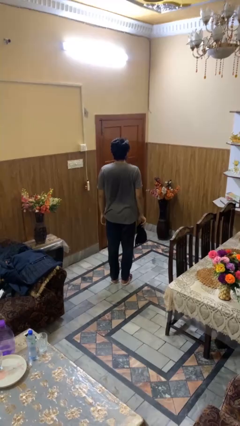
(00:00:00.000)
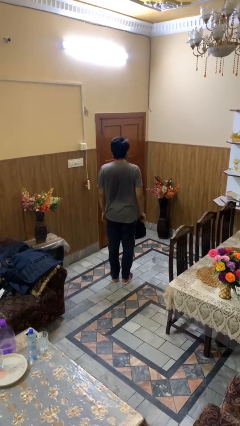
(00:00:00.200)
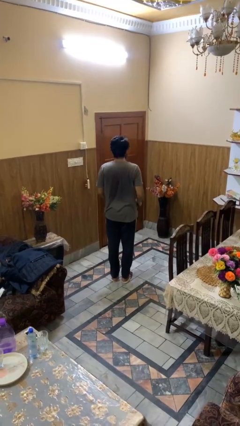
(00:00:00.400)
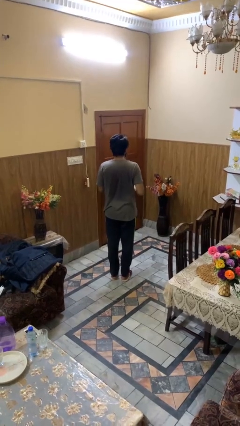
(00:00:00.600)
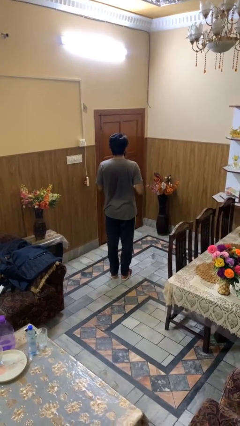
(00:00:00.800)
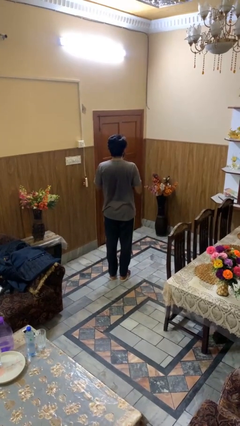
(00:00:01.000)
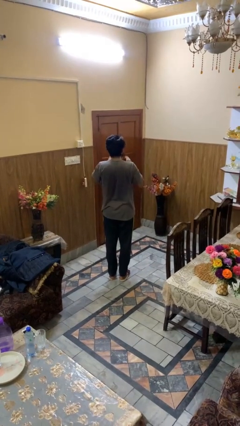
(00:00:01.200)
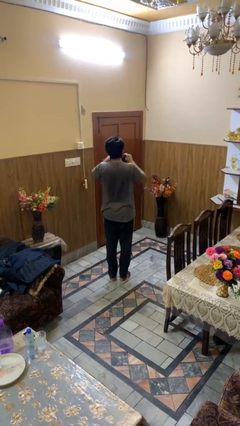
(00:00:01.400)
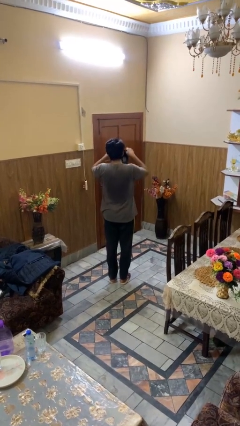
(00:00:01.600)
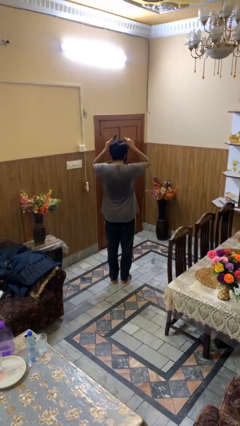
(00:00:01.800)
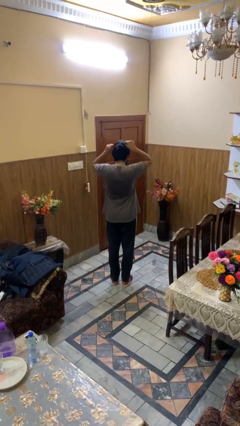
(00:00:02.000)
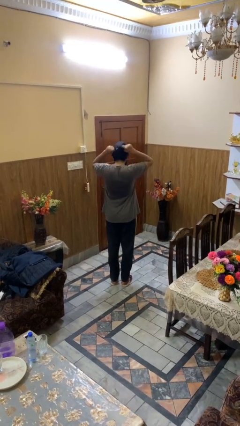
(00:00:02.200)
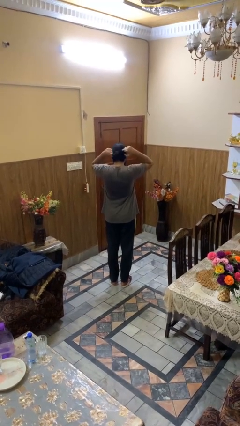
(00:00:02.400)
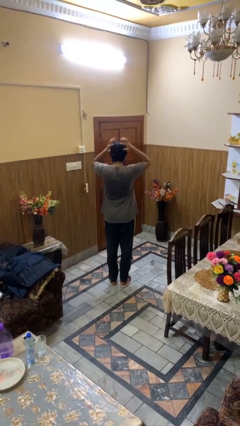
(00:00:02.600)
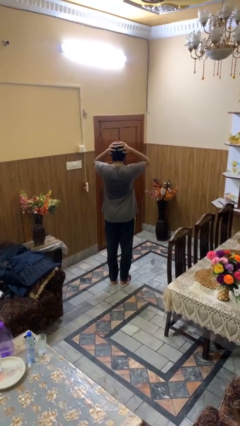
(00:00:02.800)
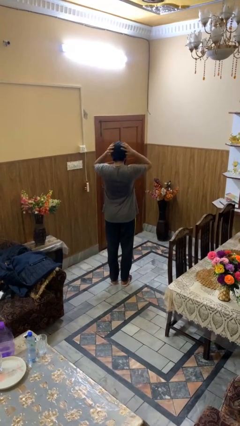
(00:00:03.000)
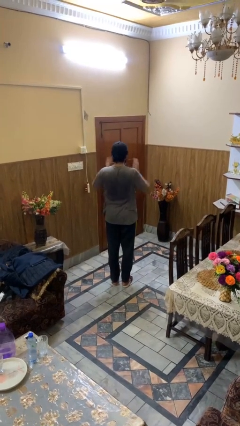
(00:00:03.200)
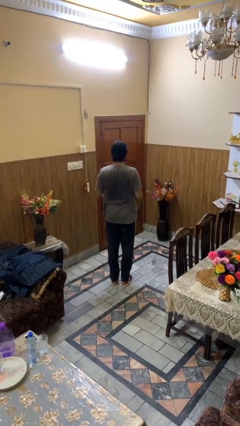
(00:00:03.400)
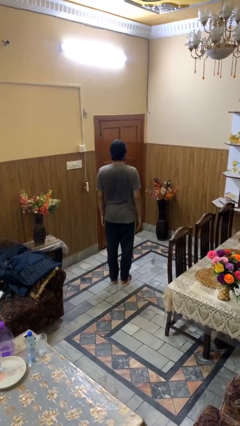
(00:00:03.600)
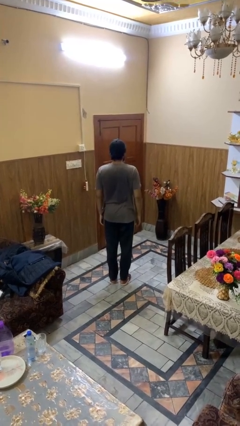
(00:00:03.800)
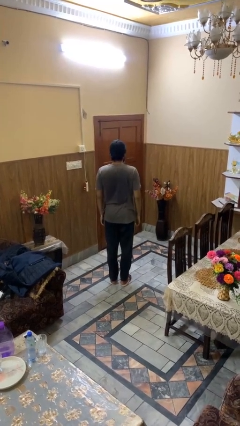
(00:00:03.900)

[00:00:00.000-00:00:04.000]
person puts on hat

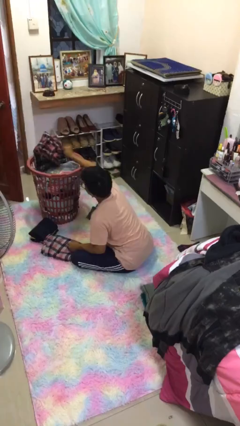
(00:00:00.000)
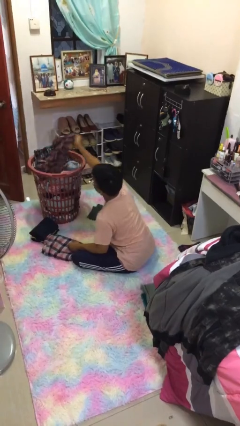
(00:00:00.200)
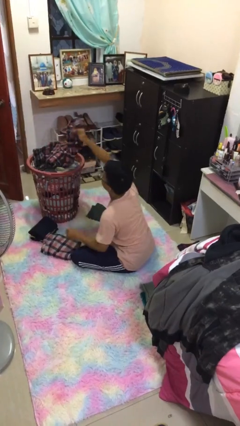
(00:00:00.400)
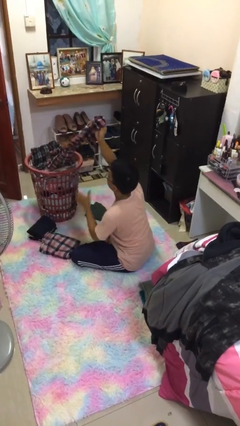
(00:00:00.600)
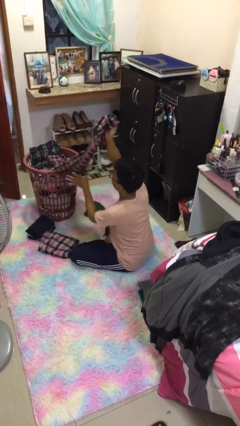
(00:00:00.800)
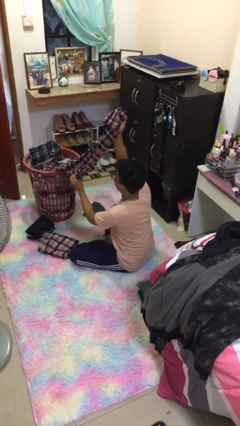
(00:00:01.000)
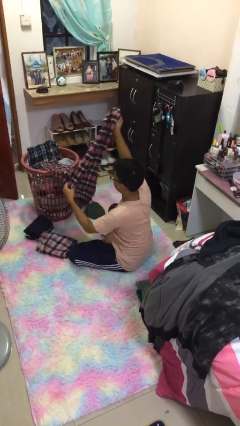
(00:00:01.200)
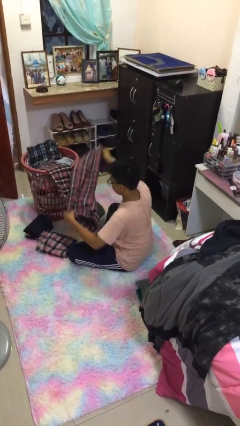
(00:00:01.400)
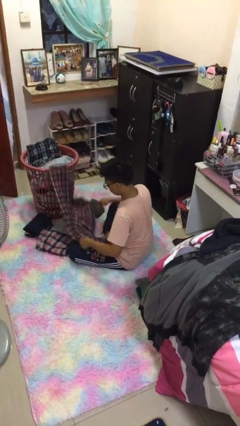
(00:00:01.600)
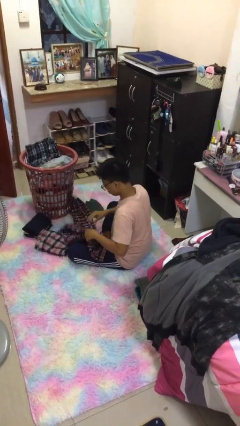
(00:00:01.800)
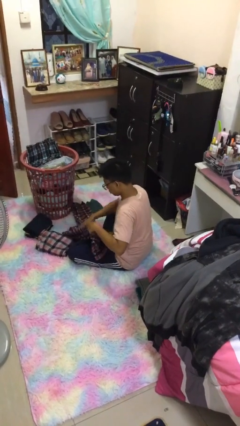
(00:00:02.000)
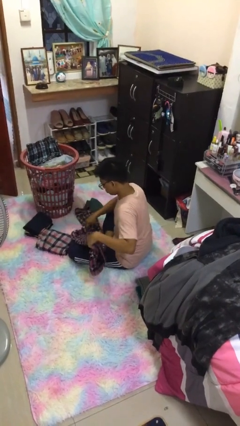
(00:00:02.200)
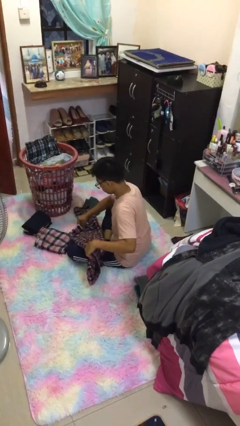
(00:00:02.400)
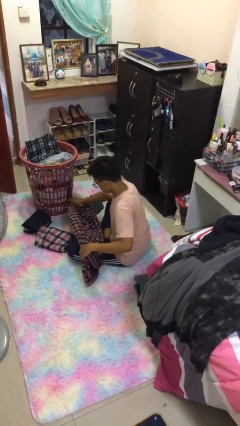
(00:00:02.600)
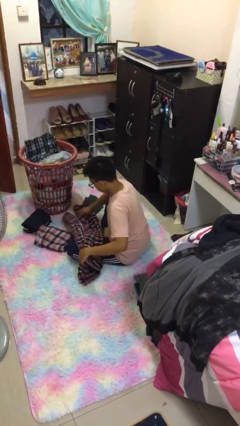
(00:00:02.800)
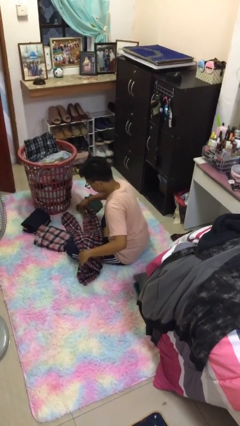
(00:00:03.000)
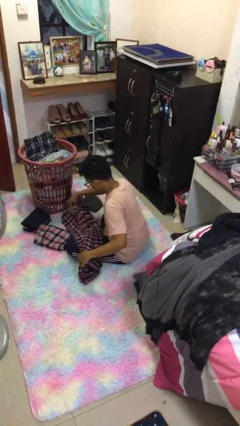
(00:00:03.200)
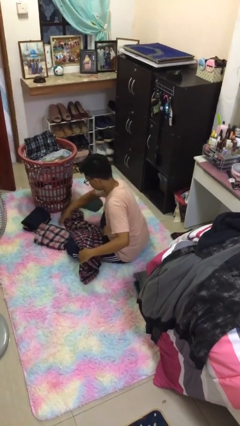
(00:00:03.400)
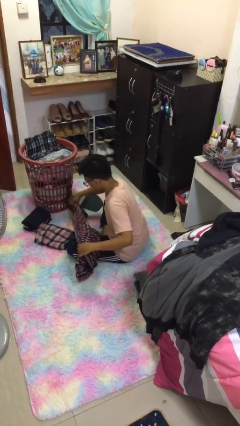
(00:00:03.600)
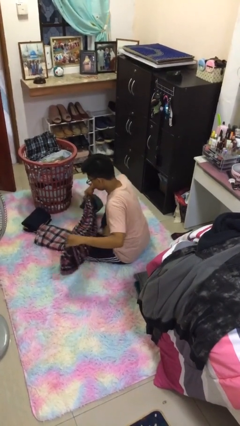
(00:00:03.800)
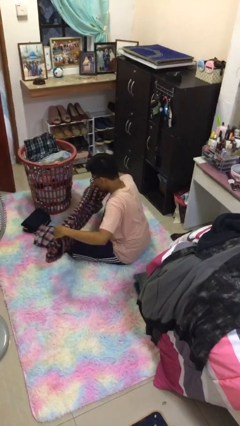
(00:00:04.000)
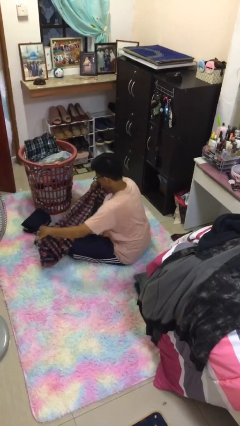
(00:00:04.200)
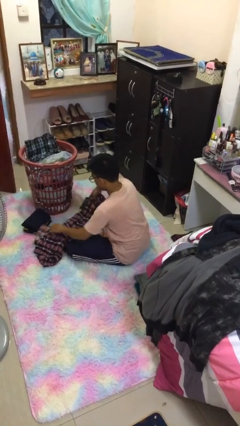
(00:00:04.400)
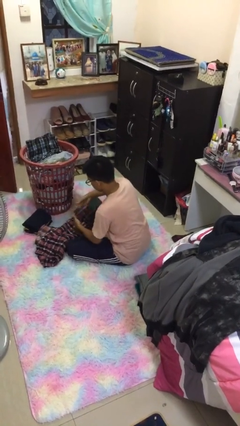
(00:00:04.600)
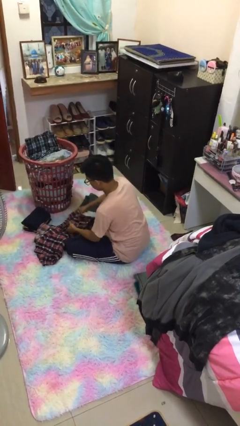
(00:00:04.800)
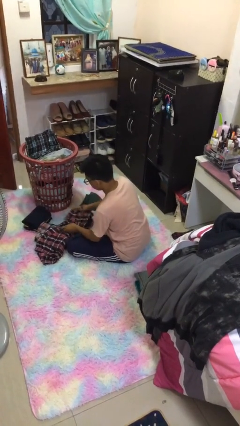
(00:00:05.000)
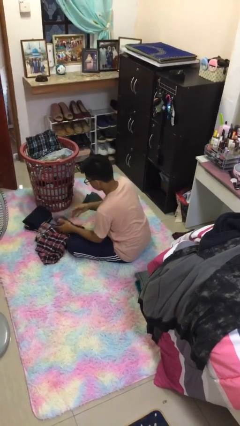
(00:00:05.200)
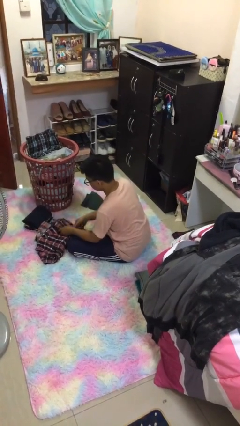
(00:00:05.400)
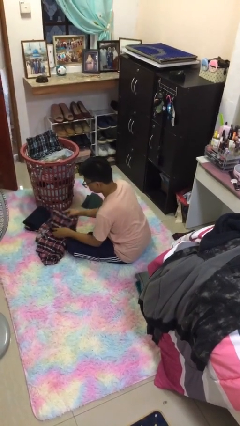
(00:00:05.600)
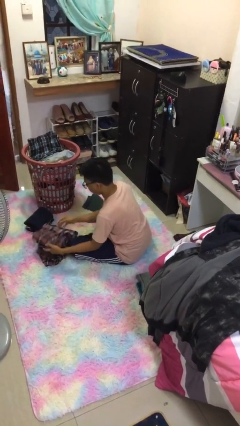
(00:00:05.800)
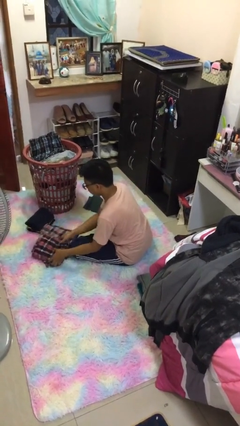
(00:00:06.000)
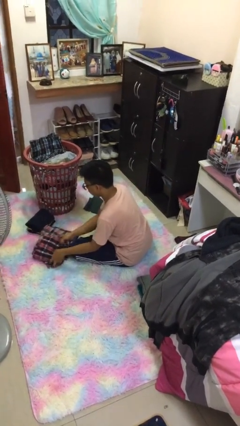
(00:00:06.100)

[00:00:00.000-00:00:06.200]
person folds pants

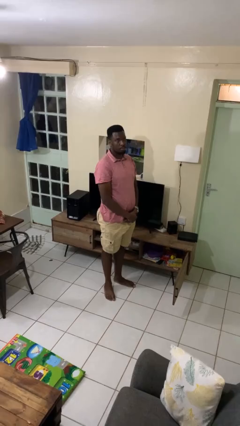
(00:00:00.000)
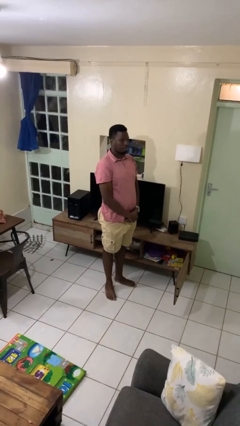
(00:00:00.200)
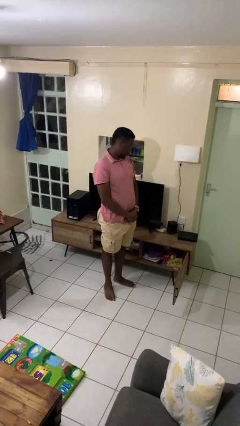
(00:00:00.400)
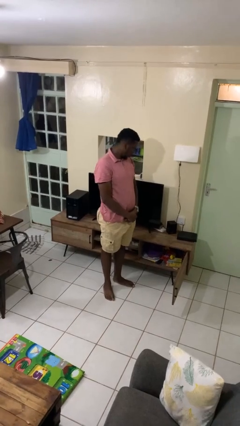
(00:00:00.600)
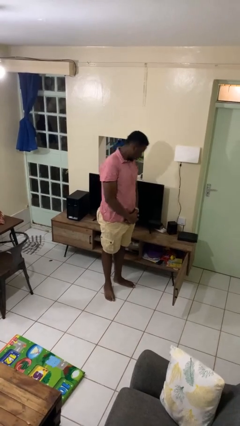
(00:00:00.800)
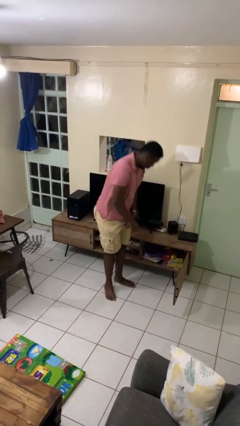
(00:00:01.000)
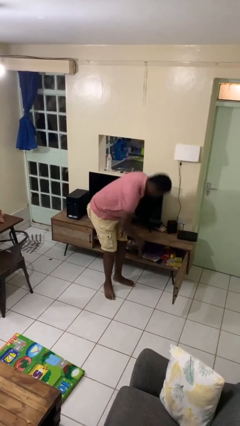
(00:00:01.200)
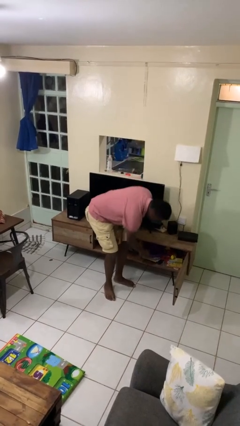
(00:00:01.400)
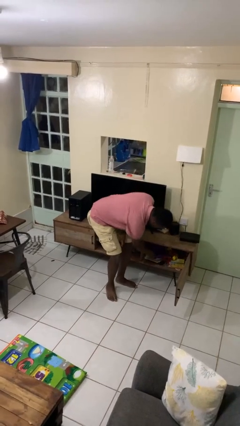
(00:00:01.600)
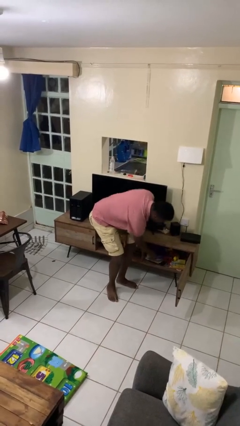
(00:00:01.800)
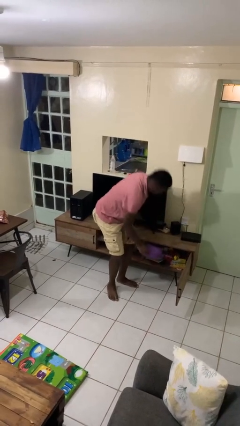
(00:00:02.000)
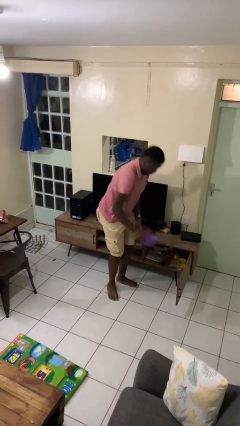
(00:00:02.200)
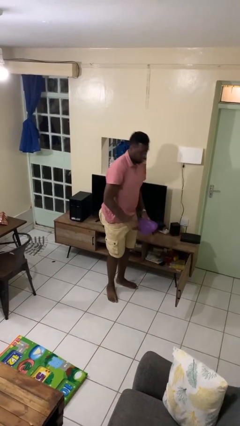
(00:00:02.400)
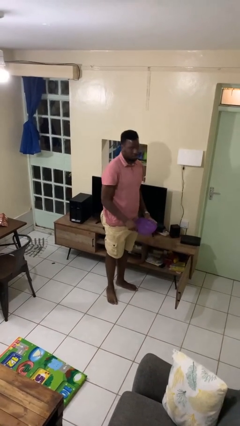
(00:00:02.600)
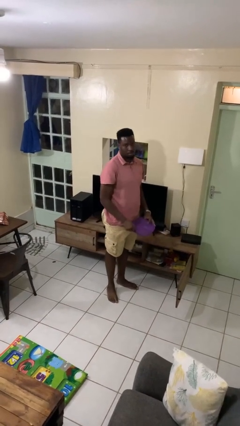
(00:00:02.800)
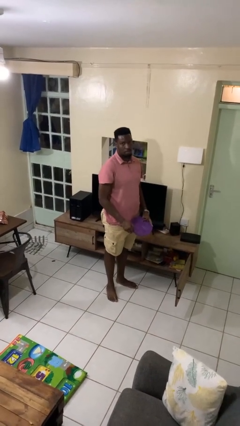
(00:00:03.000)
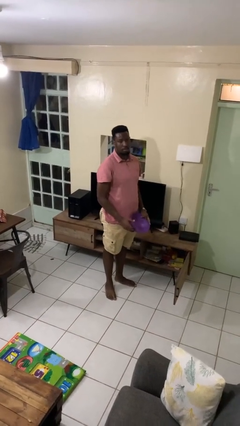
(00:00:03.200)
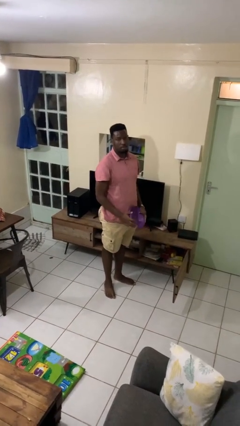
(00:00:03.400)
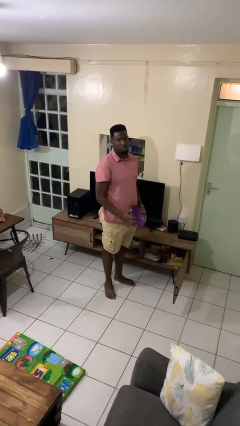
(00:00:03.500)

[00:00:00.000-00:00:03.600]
person picks up object from cabinet

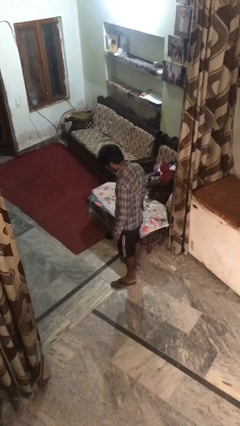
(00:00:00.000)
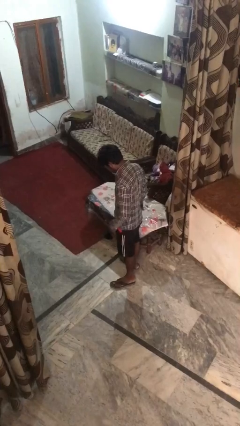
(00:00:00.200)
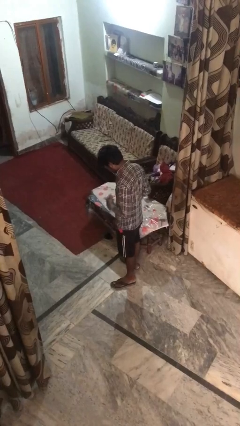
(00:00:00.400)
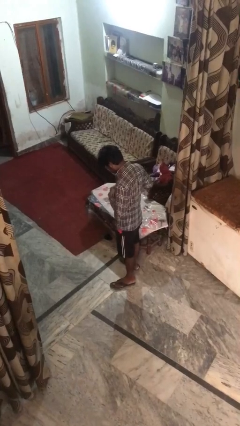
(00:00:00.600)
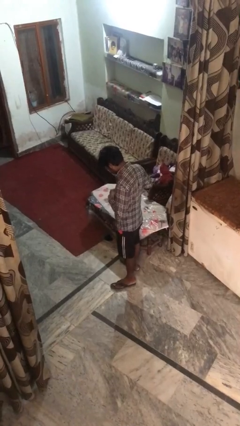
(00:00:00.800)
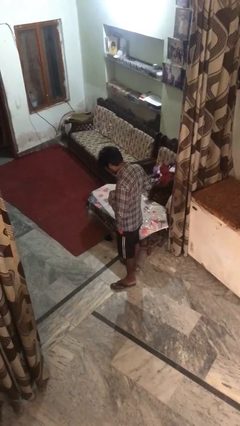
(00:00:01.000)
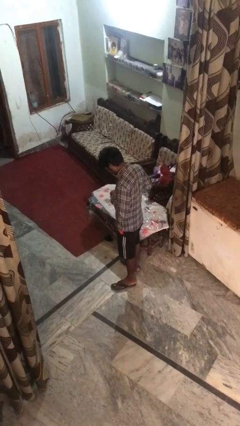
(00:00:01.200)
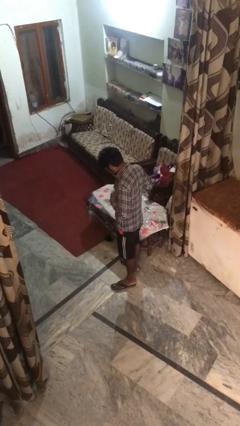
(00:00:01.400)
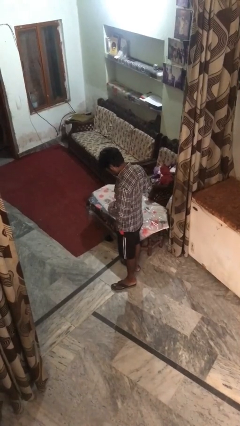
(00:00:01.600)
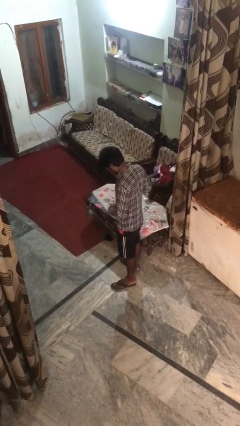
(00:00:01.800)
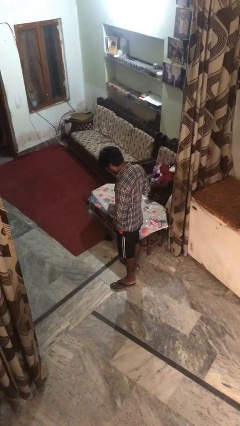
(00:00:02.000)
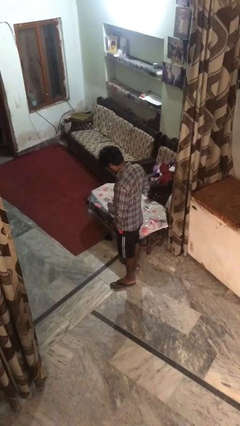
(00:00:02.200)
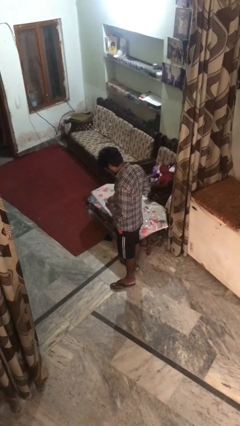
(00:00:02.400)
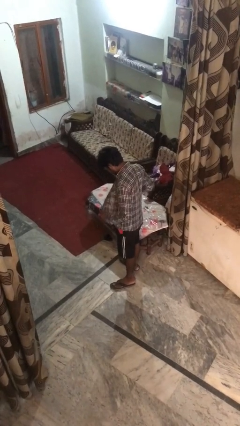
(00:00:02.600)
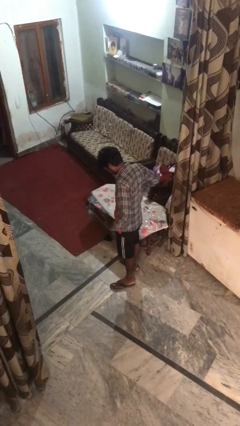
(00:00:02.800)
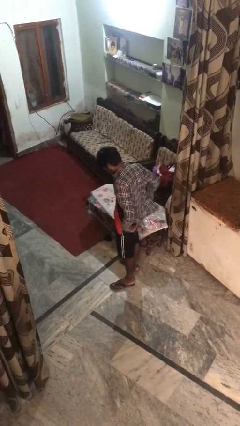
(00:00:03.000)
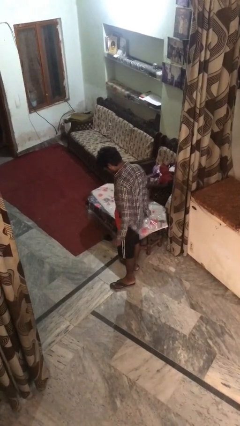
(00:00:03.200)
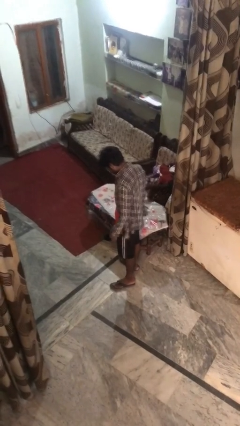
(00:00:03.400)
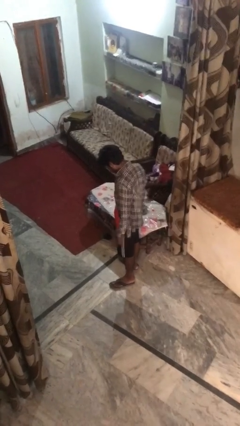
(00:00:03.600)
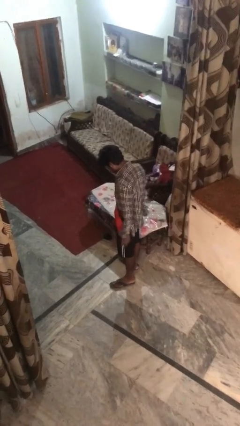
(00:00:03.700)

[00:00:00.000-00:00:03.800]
person unbuttons shirt
